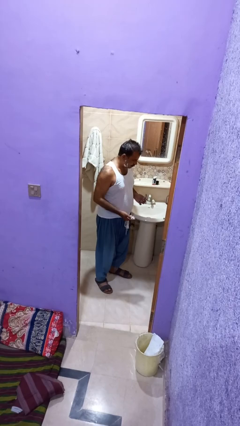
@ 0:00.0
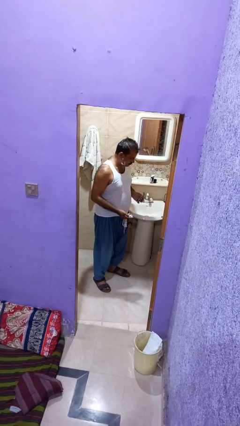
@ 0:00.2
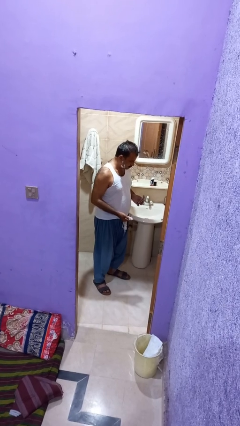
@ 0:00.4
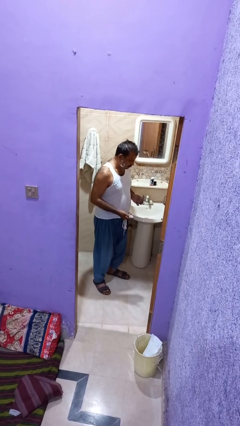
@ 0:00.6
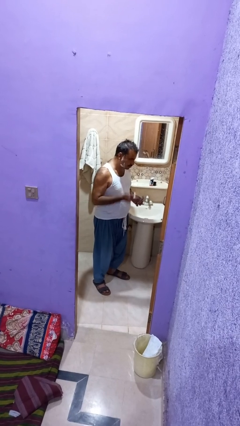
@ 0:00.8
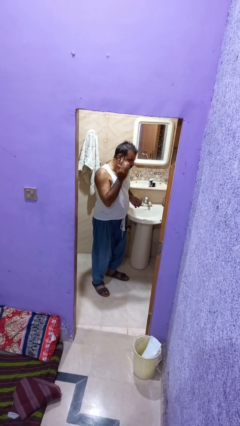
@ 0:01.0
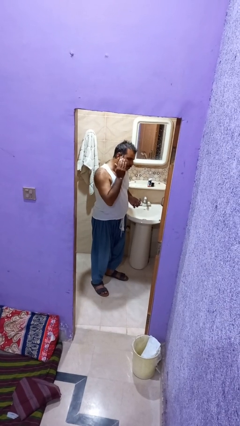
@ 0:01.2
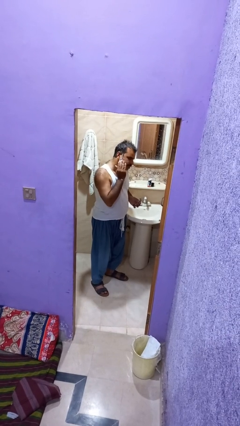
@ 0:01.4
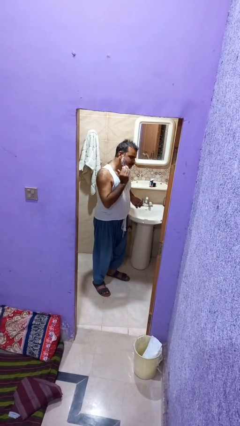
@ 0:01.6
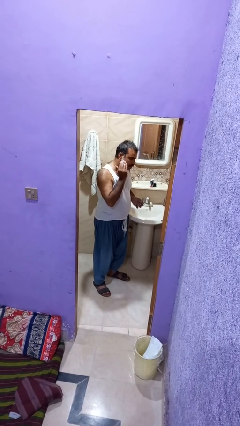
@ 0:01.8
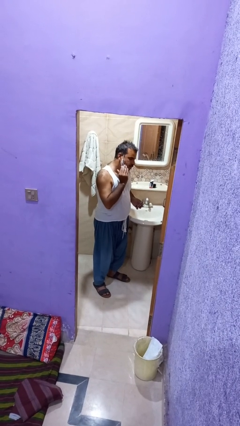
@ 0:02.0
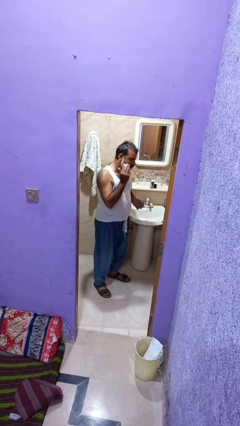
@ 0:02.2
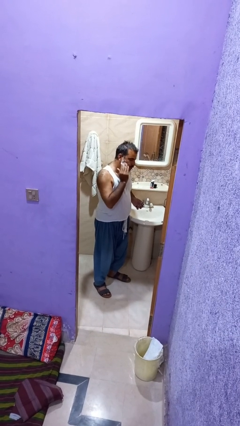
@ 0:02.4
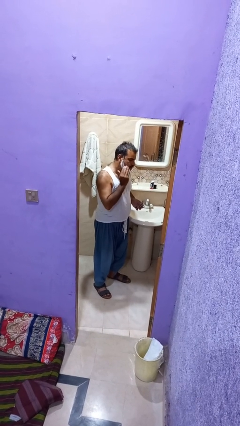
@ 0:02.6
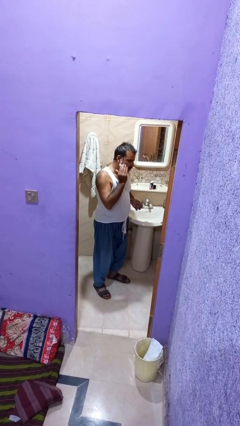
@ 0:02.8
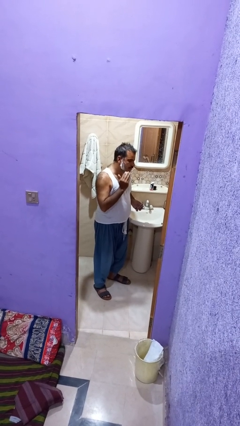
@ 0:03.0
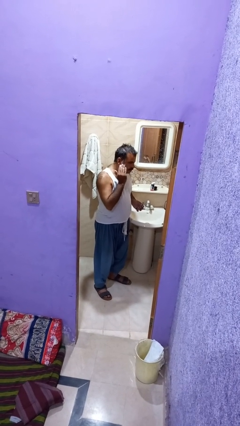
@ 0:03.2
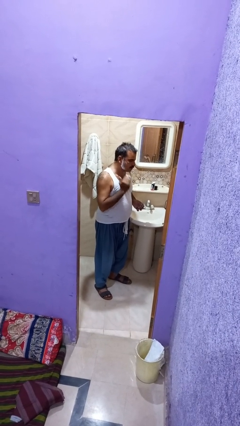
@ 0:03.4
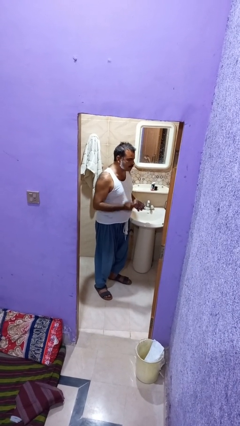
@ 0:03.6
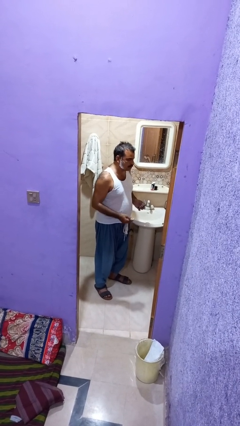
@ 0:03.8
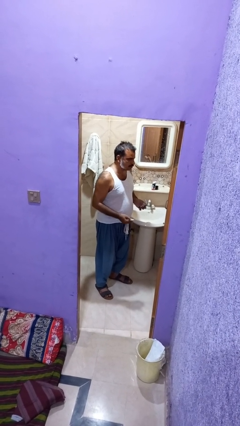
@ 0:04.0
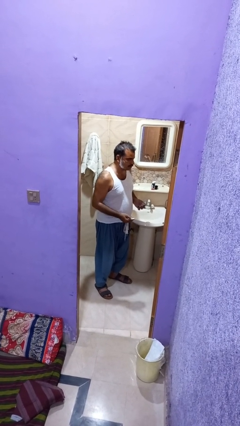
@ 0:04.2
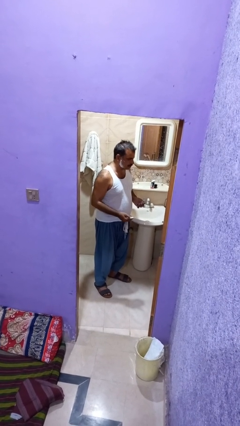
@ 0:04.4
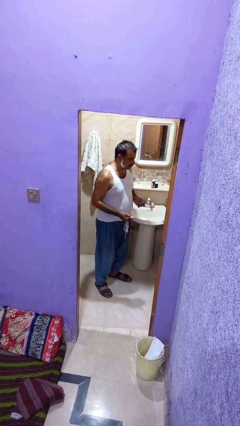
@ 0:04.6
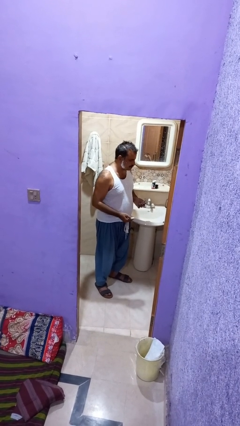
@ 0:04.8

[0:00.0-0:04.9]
person applies shaving cream

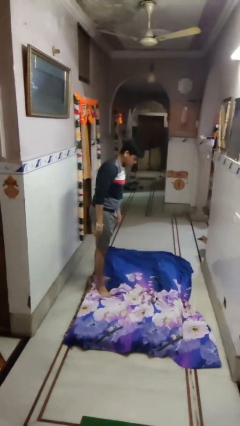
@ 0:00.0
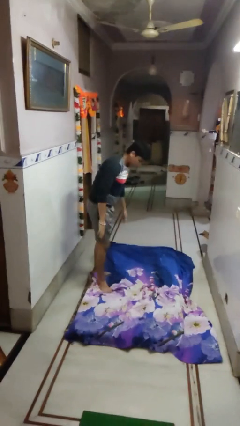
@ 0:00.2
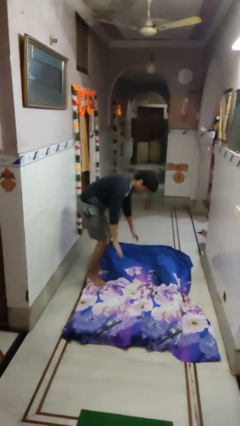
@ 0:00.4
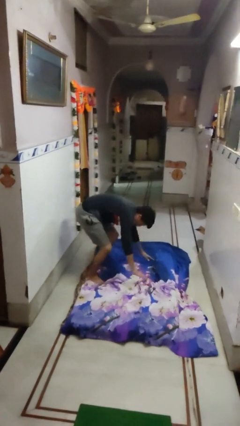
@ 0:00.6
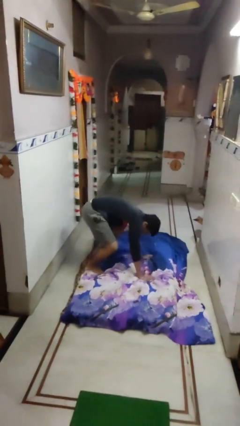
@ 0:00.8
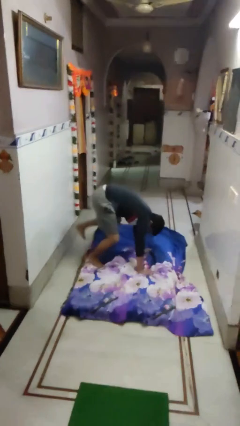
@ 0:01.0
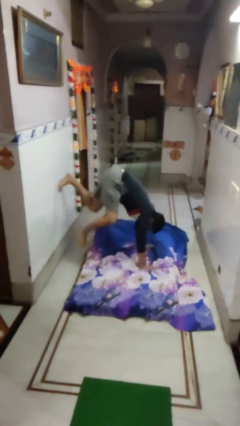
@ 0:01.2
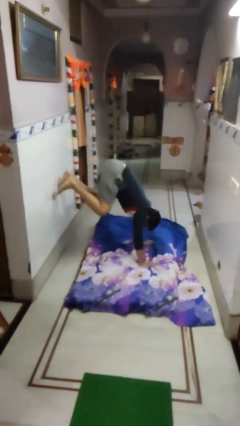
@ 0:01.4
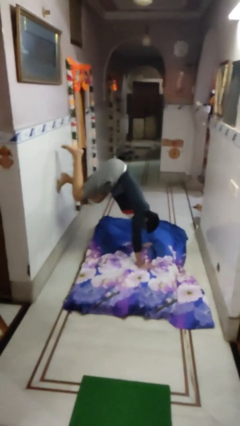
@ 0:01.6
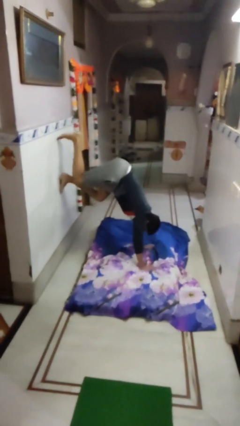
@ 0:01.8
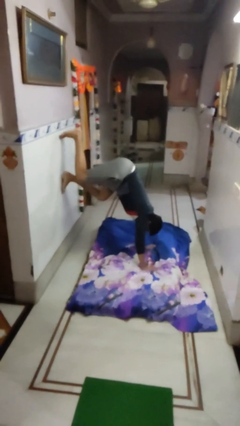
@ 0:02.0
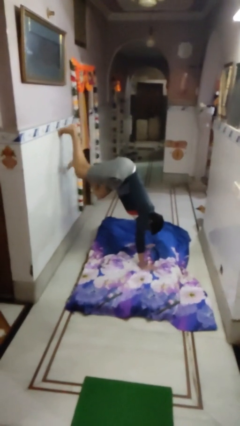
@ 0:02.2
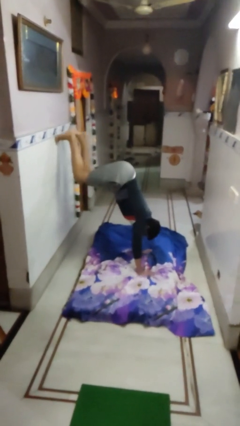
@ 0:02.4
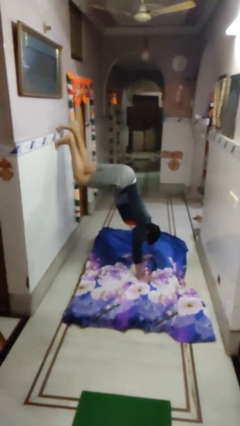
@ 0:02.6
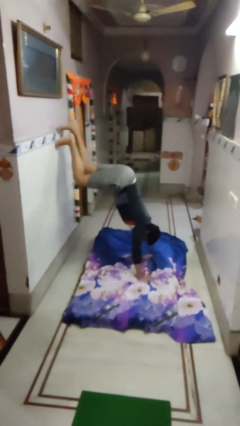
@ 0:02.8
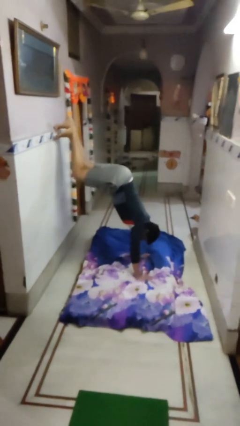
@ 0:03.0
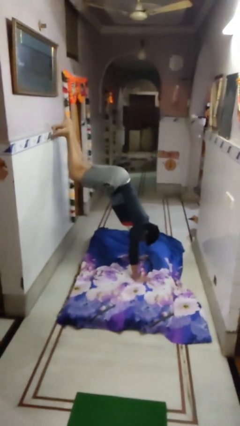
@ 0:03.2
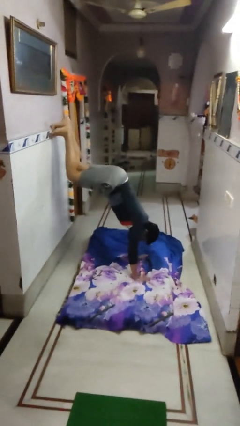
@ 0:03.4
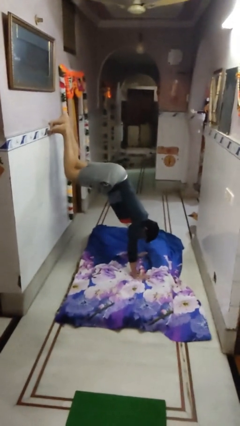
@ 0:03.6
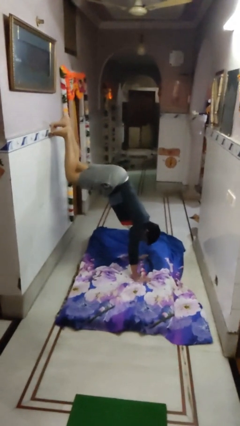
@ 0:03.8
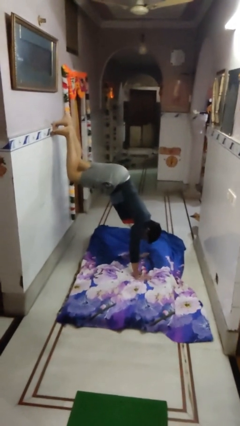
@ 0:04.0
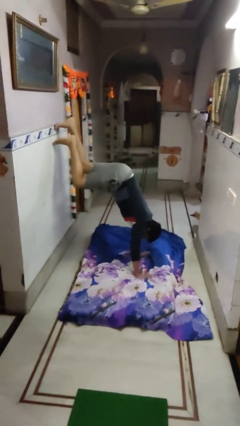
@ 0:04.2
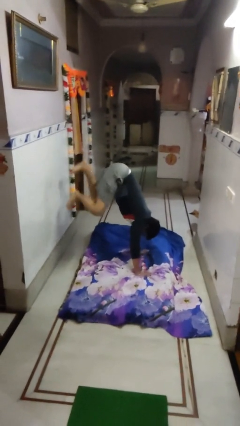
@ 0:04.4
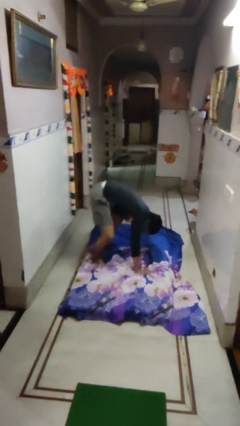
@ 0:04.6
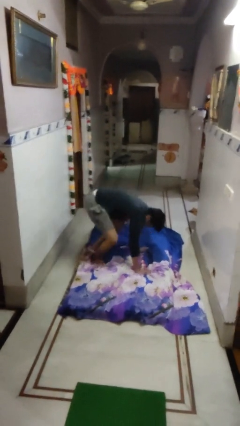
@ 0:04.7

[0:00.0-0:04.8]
person handstand

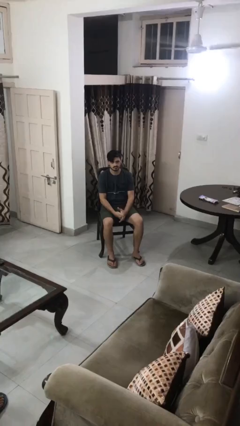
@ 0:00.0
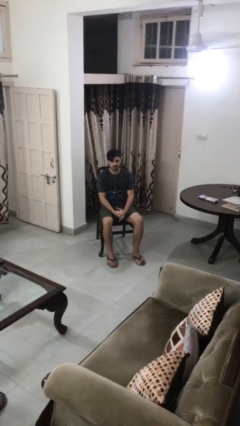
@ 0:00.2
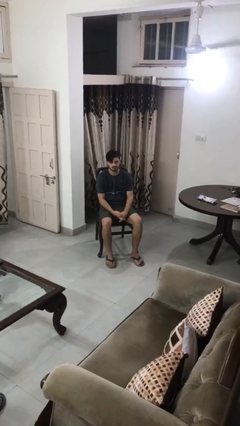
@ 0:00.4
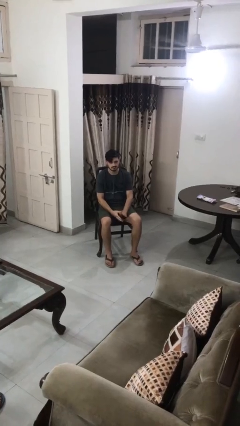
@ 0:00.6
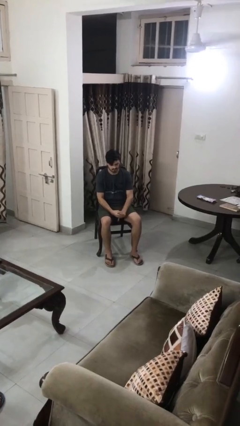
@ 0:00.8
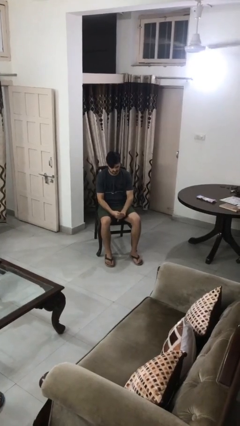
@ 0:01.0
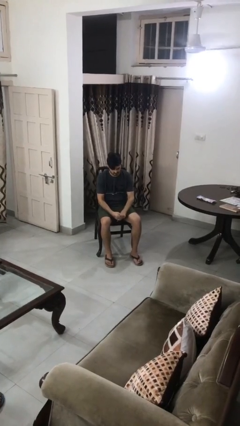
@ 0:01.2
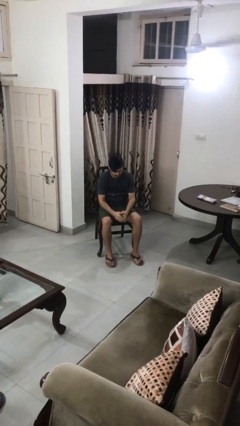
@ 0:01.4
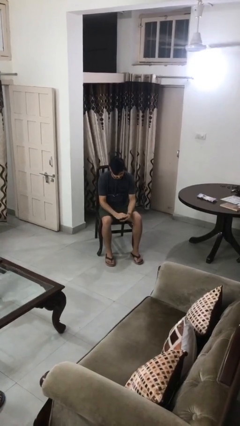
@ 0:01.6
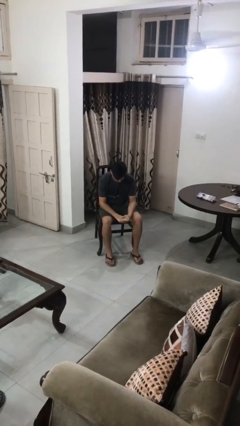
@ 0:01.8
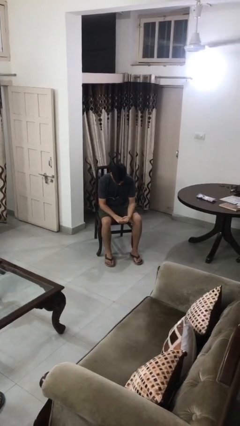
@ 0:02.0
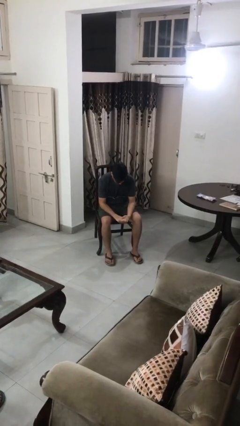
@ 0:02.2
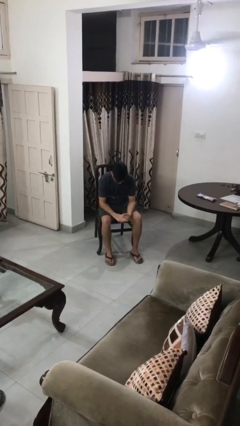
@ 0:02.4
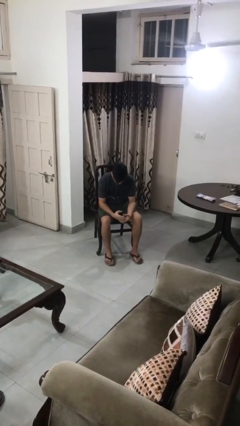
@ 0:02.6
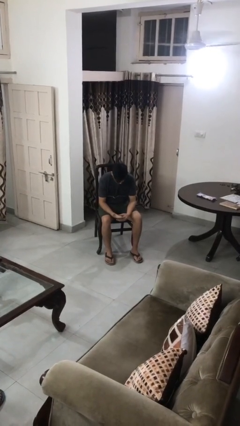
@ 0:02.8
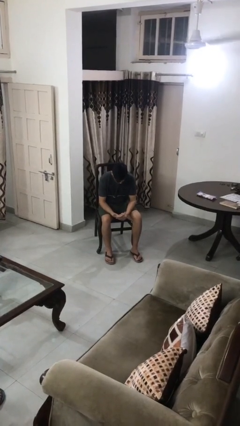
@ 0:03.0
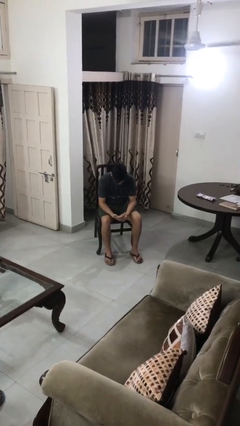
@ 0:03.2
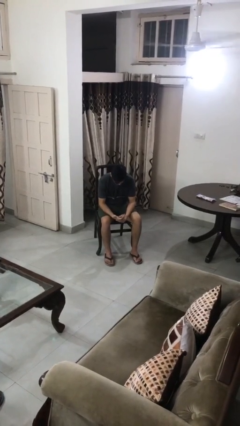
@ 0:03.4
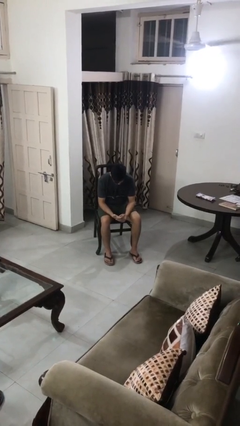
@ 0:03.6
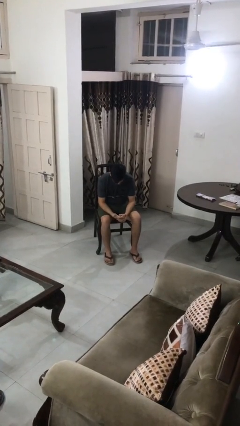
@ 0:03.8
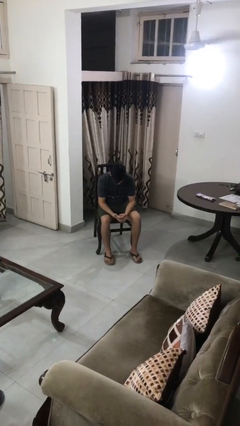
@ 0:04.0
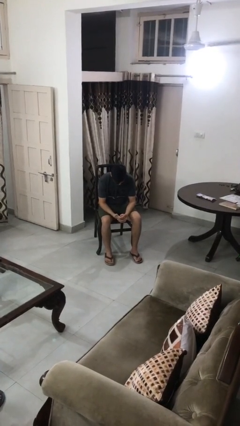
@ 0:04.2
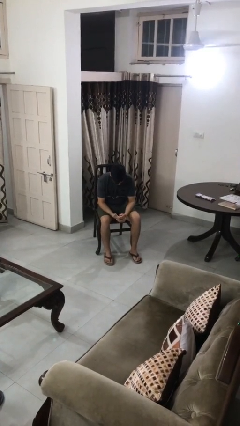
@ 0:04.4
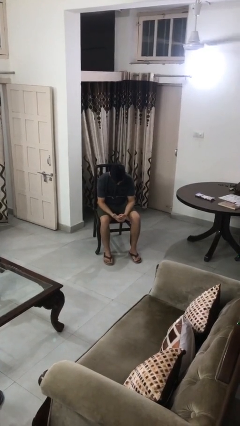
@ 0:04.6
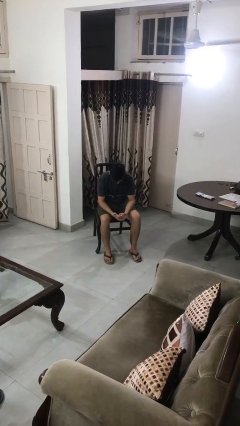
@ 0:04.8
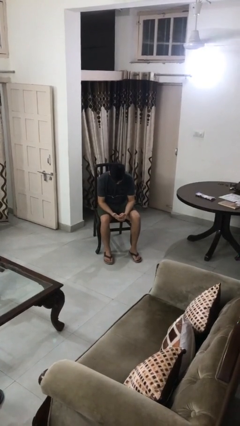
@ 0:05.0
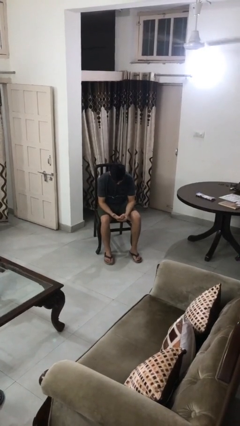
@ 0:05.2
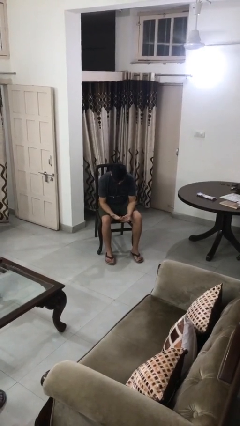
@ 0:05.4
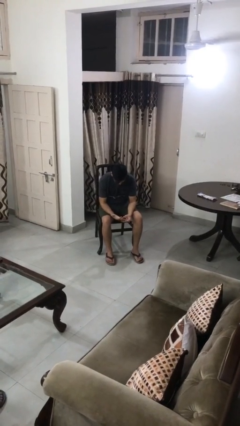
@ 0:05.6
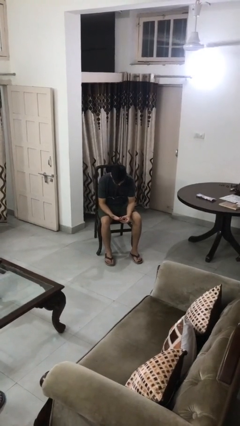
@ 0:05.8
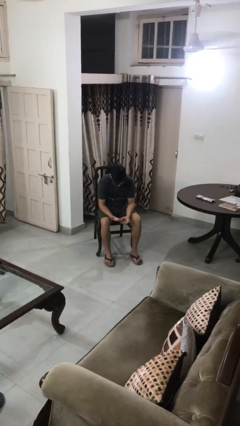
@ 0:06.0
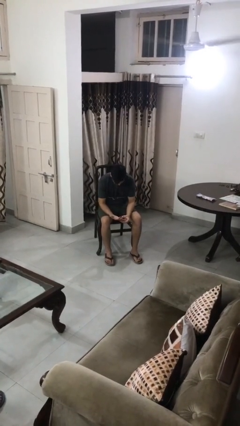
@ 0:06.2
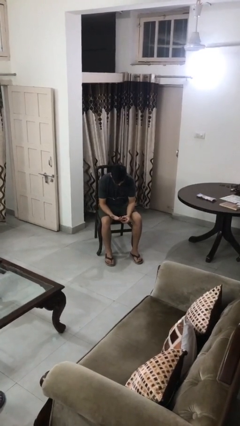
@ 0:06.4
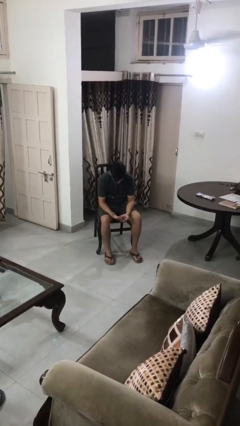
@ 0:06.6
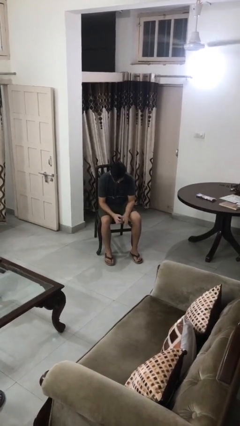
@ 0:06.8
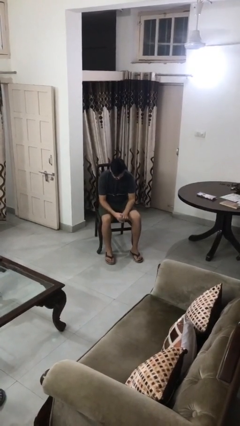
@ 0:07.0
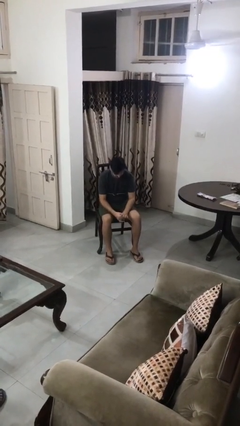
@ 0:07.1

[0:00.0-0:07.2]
person looks at hands in lap

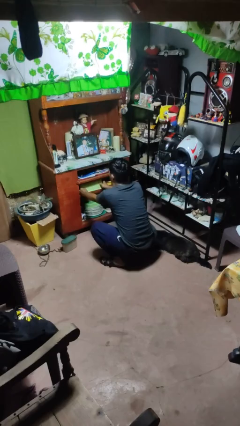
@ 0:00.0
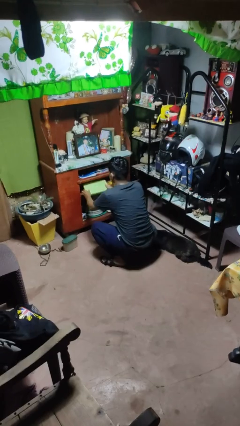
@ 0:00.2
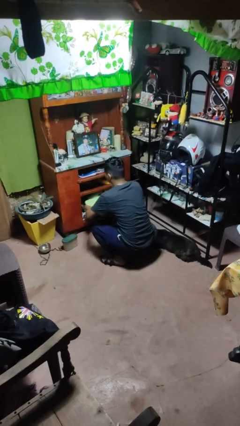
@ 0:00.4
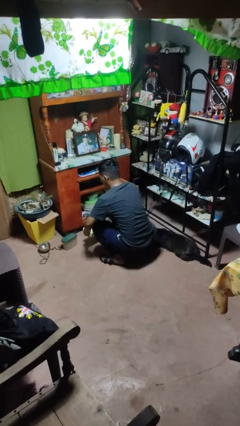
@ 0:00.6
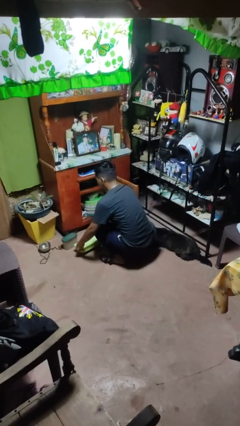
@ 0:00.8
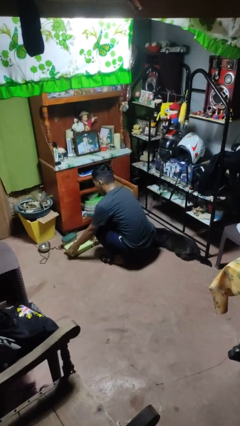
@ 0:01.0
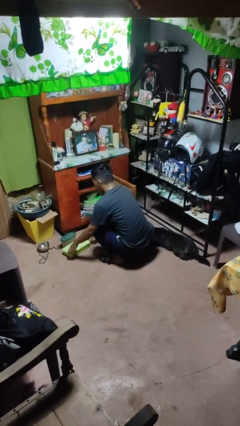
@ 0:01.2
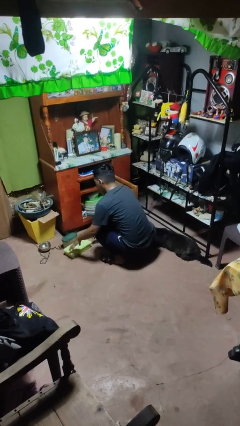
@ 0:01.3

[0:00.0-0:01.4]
person takes object from cabinet
